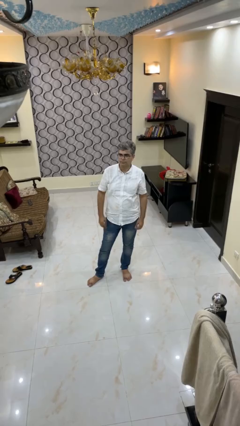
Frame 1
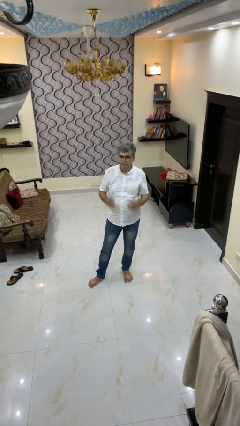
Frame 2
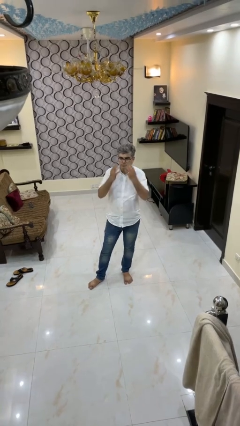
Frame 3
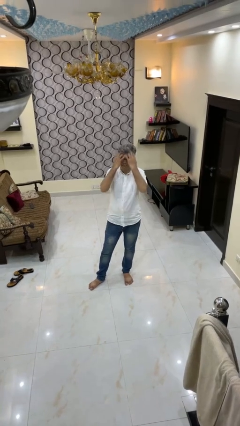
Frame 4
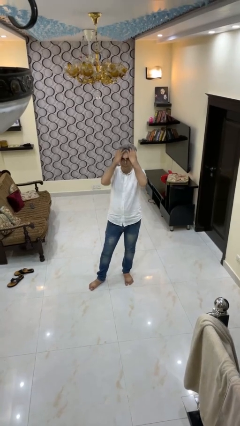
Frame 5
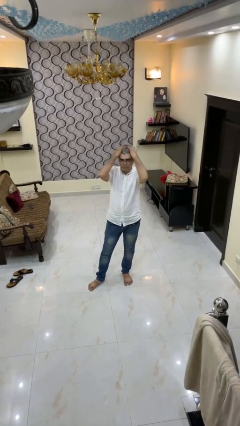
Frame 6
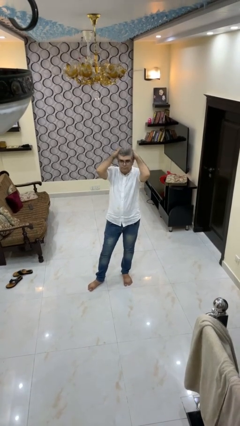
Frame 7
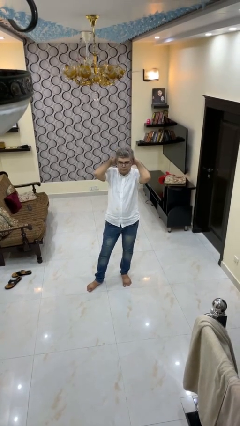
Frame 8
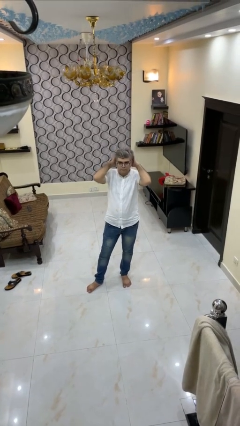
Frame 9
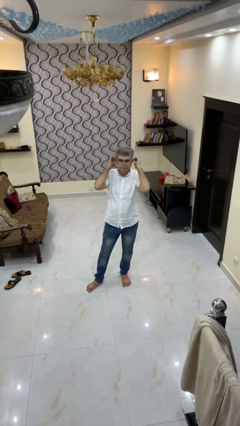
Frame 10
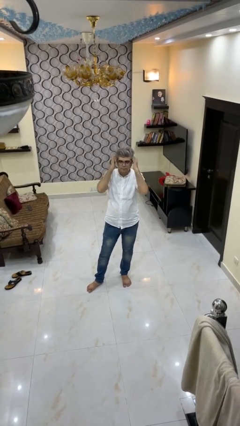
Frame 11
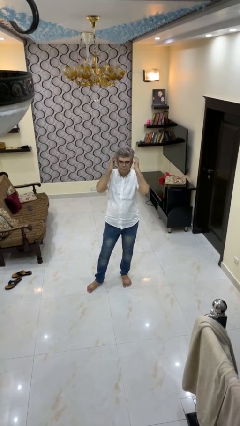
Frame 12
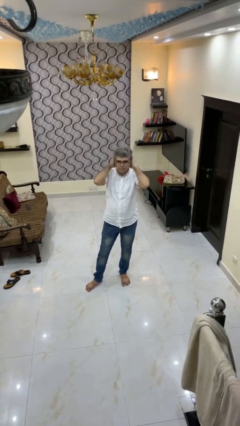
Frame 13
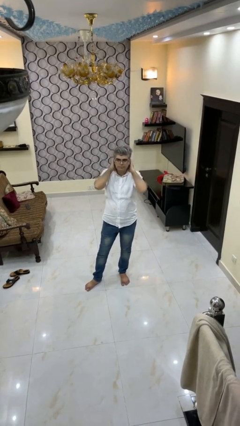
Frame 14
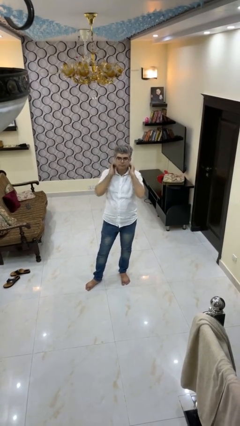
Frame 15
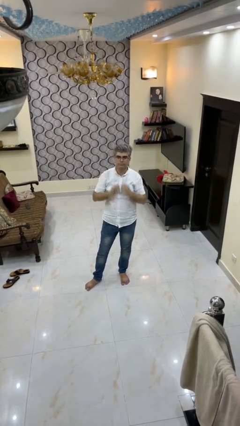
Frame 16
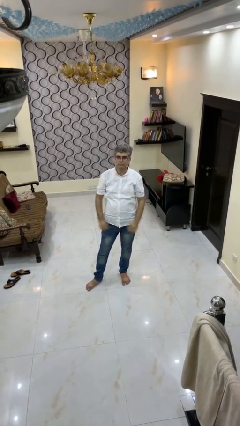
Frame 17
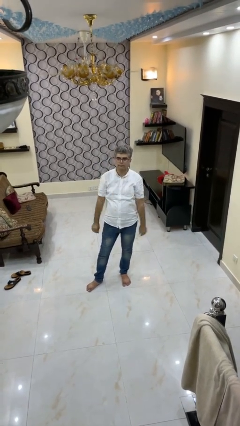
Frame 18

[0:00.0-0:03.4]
person strokes hair

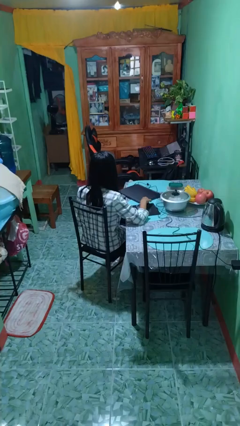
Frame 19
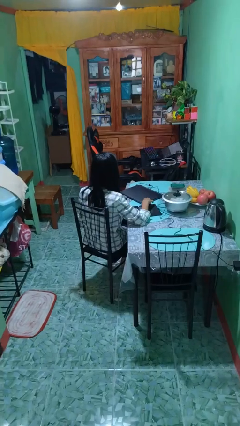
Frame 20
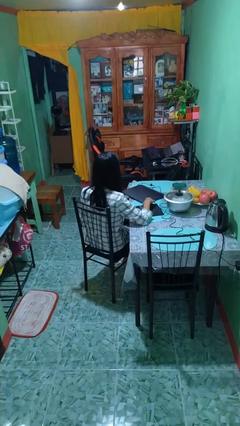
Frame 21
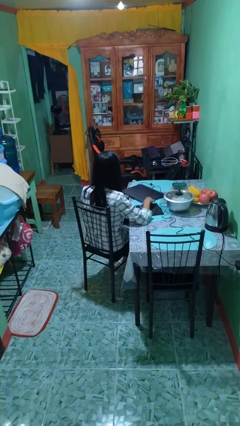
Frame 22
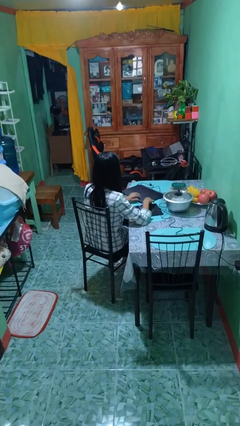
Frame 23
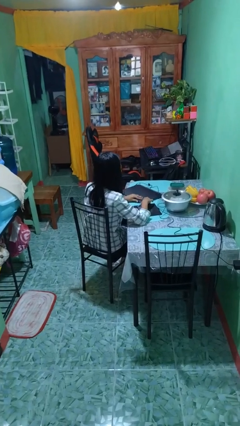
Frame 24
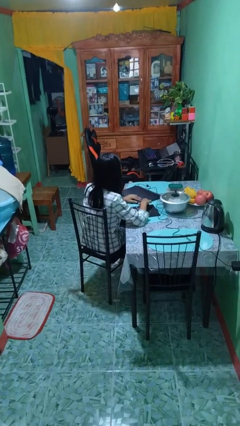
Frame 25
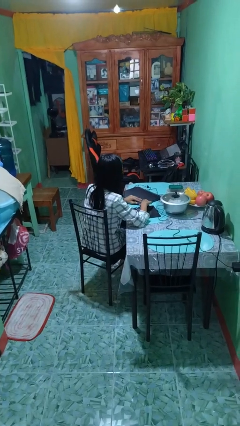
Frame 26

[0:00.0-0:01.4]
person opens laptop

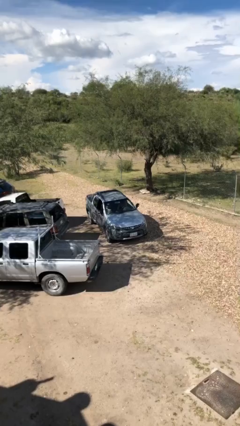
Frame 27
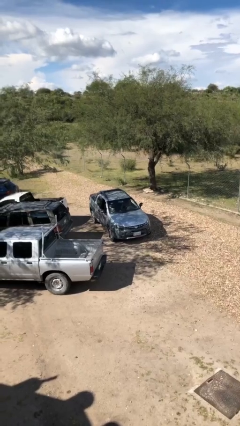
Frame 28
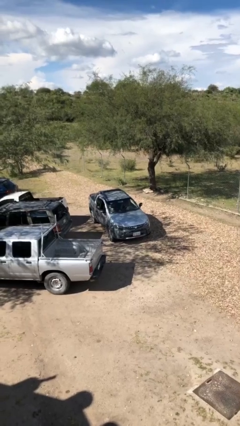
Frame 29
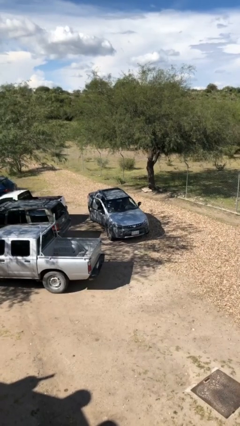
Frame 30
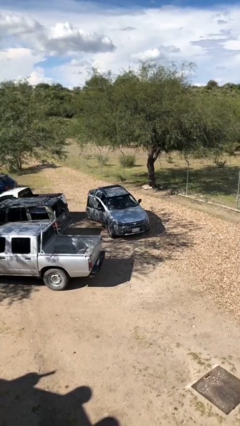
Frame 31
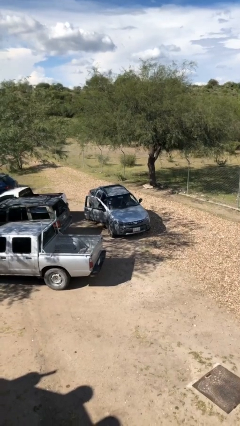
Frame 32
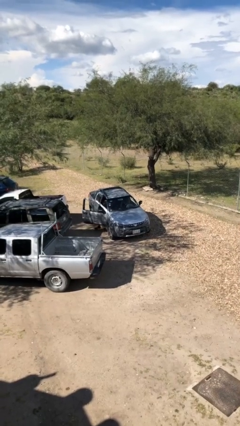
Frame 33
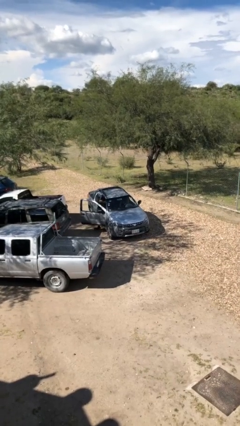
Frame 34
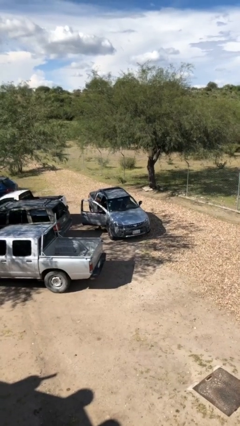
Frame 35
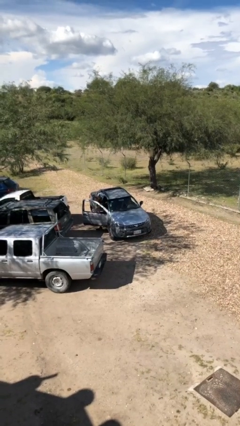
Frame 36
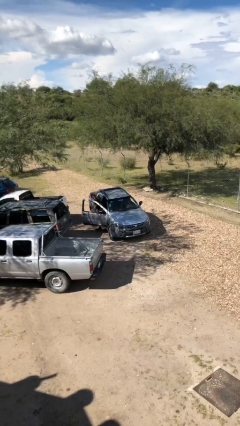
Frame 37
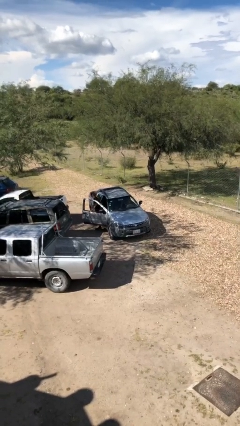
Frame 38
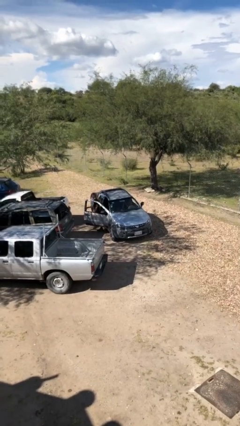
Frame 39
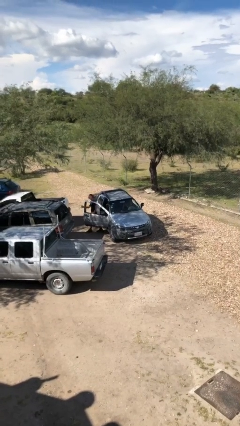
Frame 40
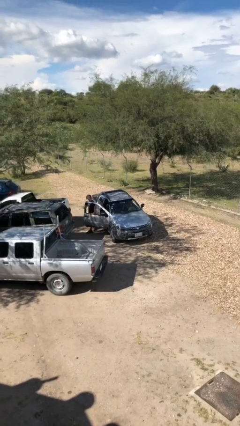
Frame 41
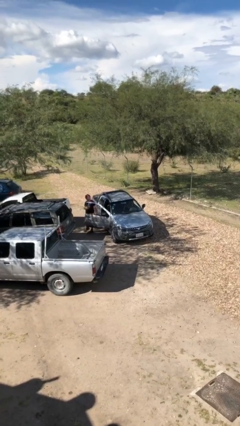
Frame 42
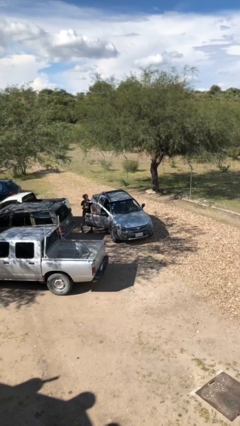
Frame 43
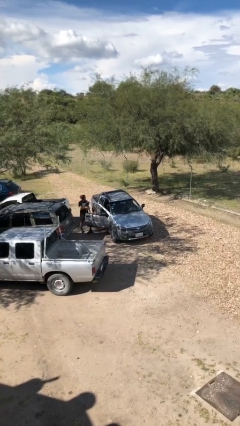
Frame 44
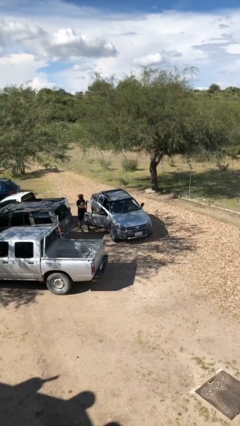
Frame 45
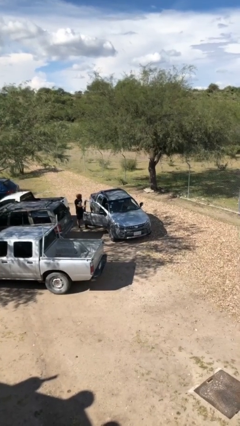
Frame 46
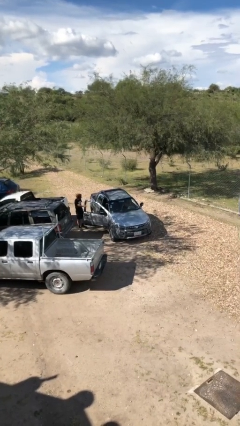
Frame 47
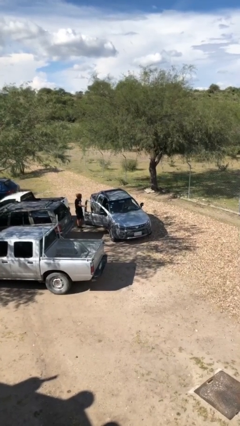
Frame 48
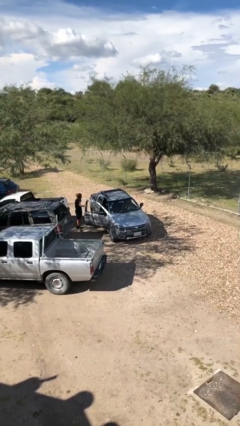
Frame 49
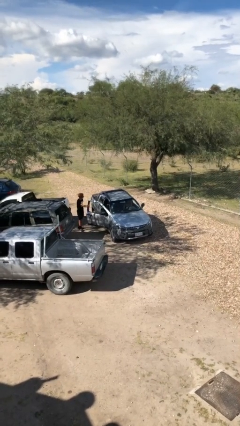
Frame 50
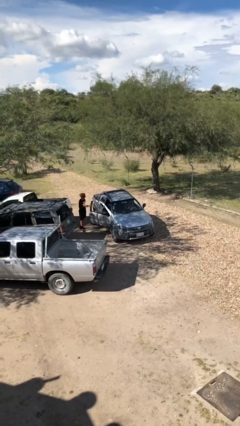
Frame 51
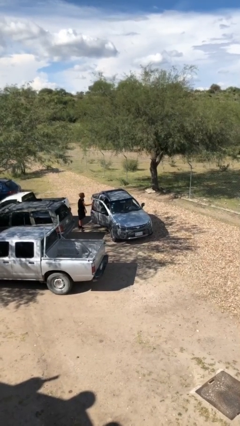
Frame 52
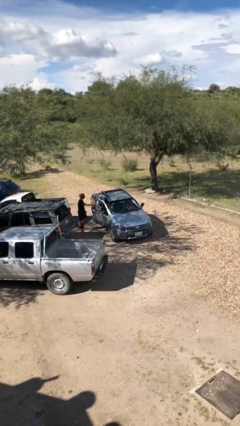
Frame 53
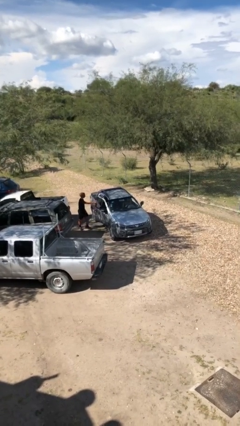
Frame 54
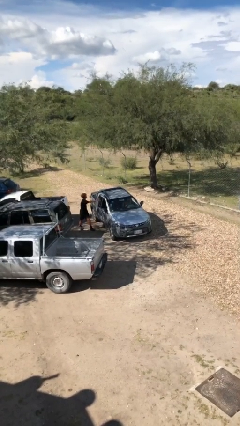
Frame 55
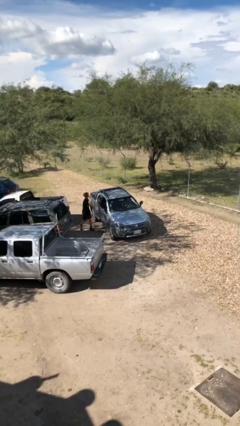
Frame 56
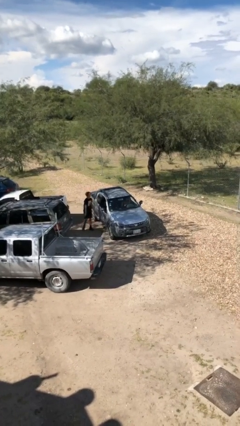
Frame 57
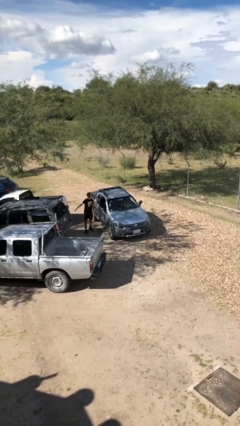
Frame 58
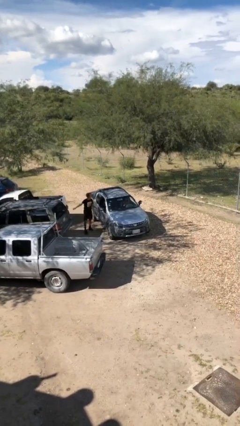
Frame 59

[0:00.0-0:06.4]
car drops off person

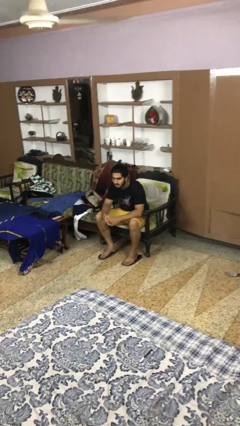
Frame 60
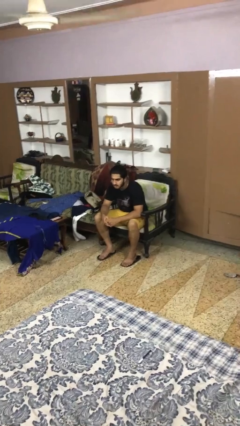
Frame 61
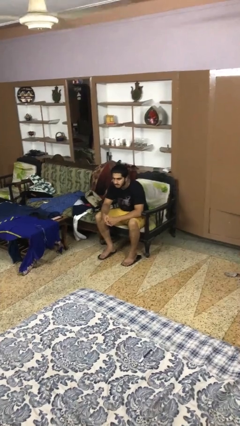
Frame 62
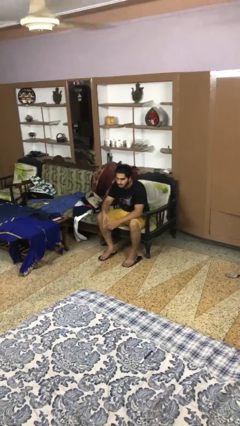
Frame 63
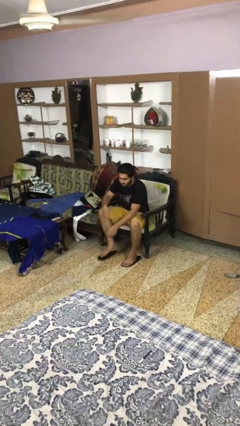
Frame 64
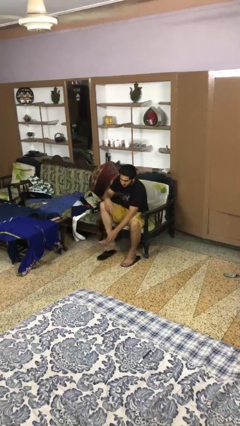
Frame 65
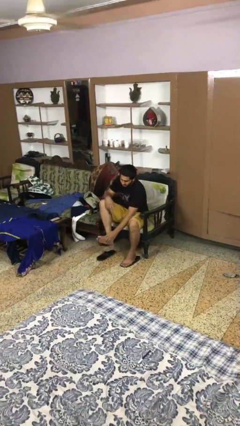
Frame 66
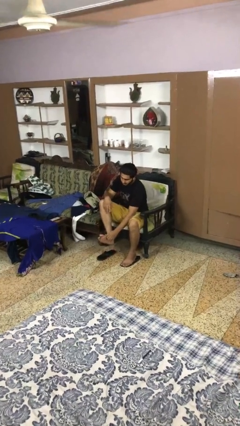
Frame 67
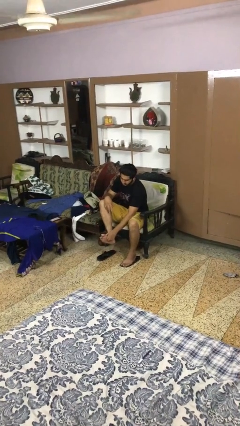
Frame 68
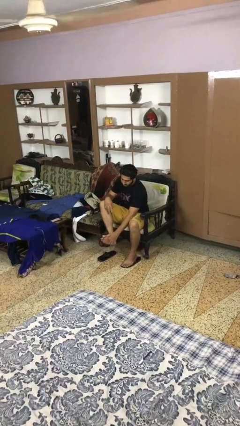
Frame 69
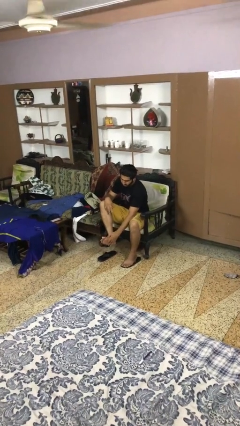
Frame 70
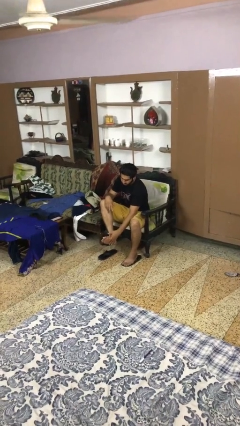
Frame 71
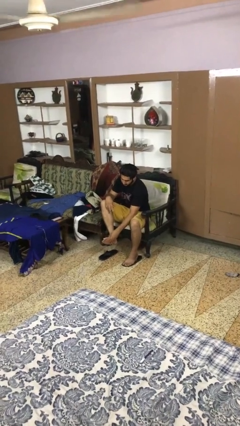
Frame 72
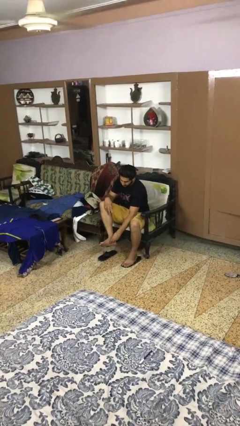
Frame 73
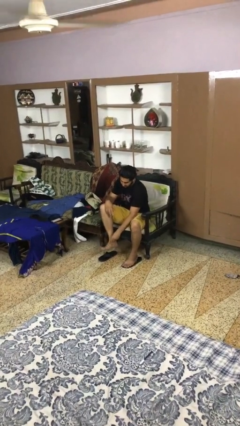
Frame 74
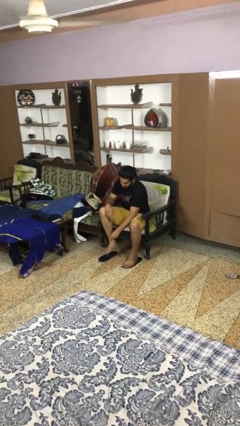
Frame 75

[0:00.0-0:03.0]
person rubs foot

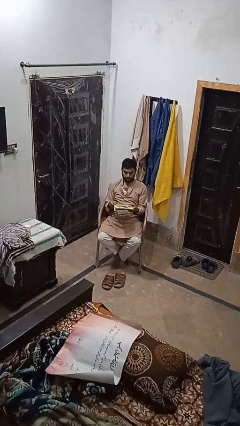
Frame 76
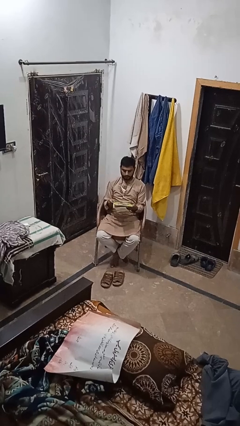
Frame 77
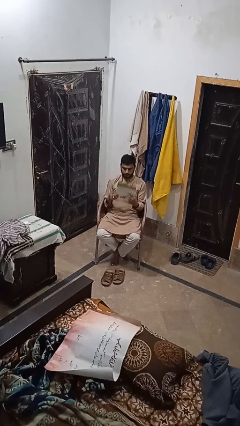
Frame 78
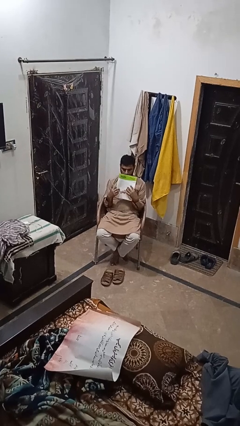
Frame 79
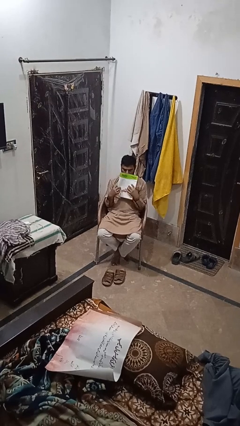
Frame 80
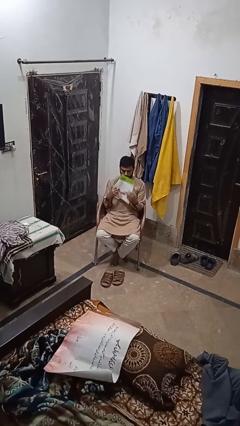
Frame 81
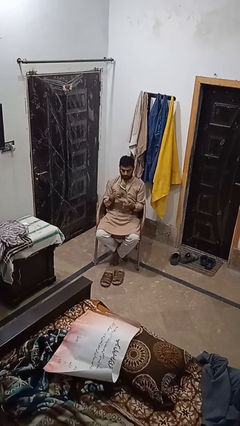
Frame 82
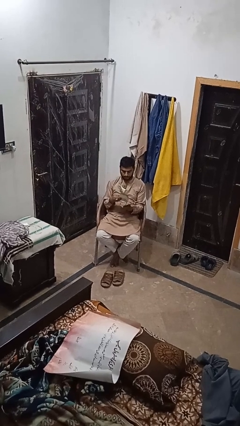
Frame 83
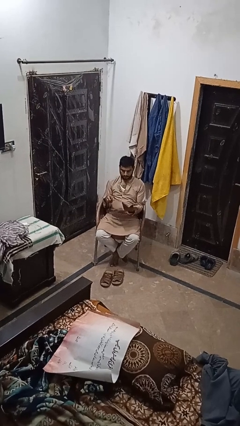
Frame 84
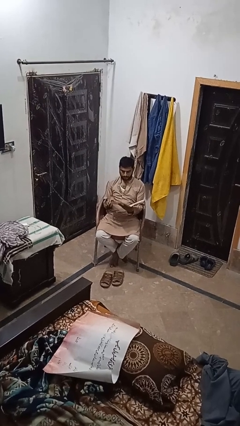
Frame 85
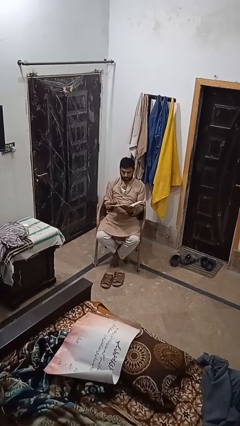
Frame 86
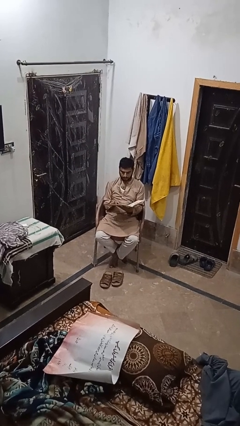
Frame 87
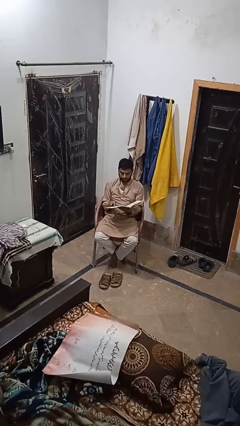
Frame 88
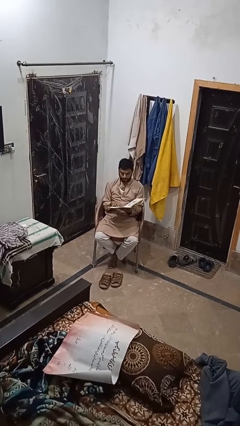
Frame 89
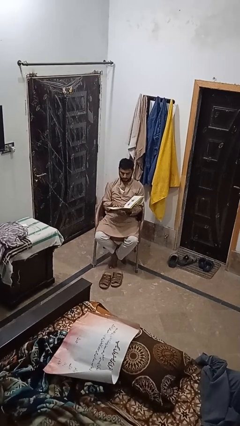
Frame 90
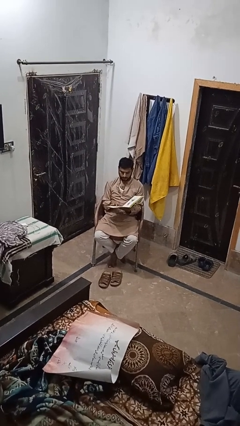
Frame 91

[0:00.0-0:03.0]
person reads magazine
